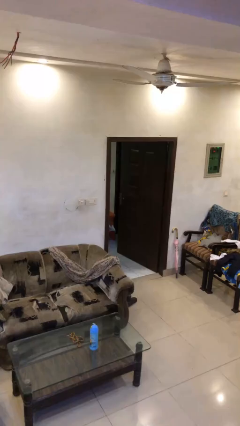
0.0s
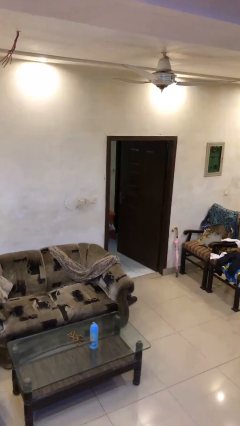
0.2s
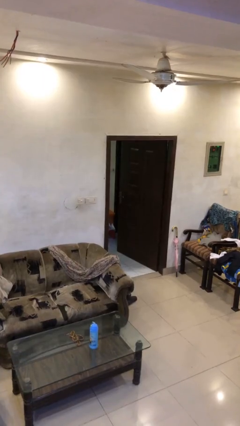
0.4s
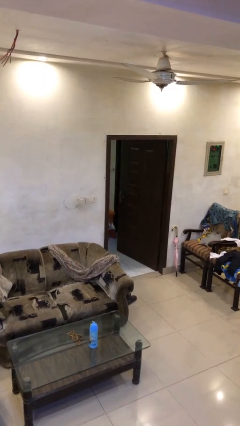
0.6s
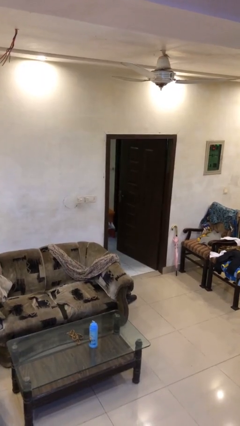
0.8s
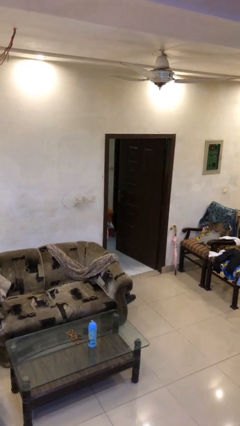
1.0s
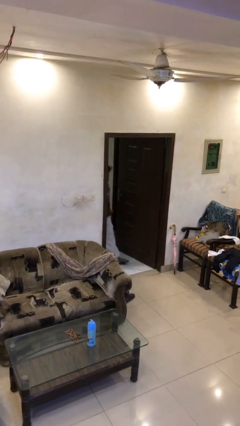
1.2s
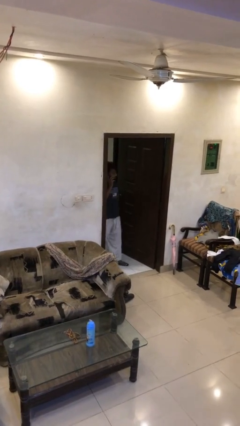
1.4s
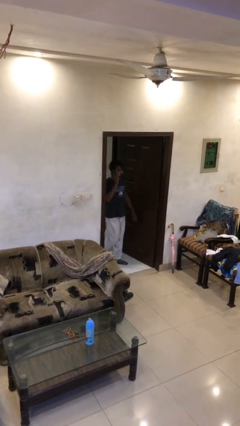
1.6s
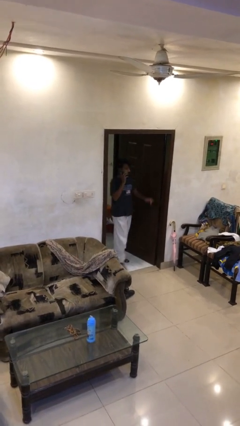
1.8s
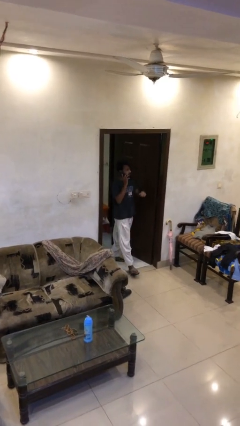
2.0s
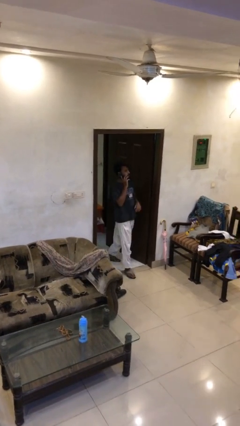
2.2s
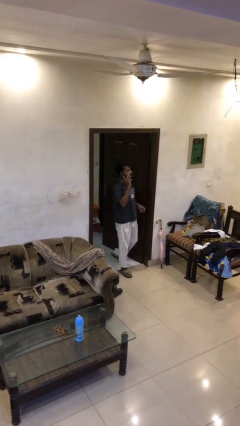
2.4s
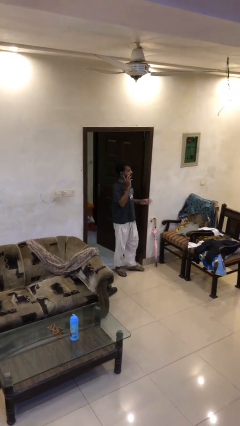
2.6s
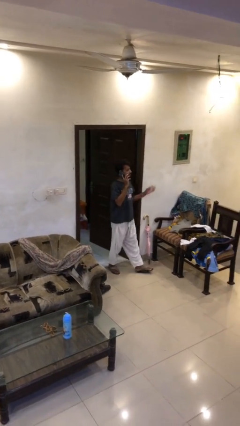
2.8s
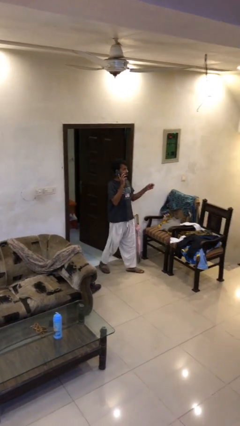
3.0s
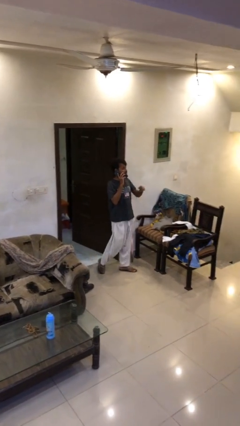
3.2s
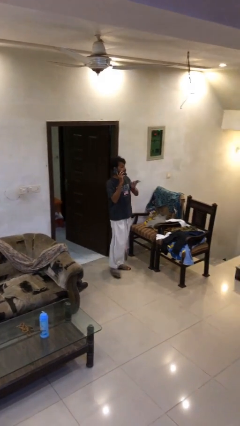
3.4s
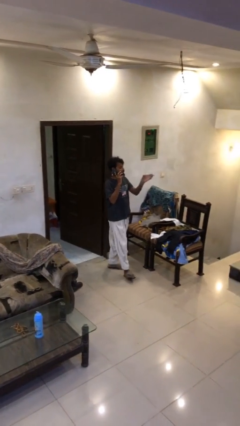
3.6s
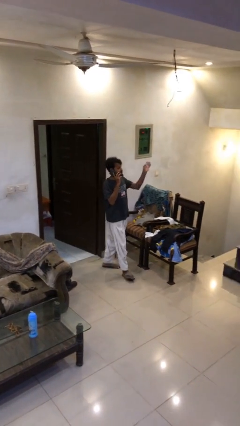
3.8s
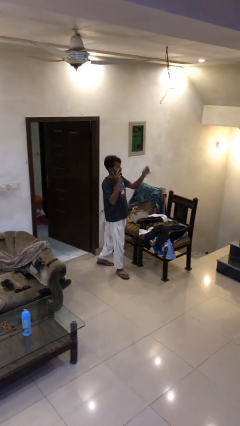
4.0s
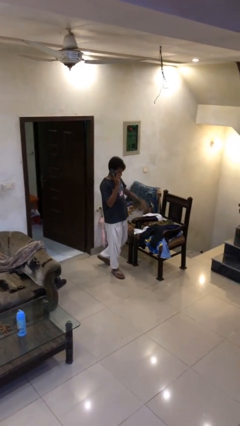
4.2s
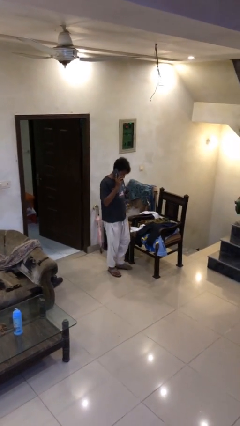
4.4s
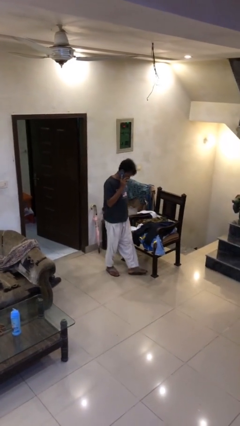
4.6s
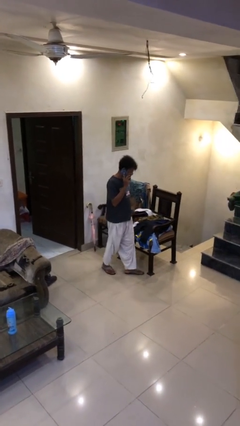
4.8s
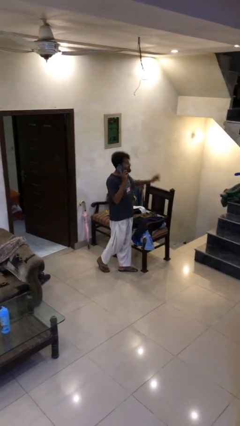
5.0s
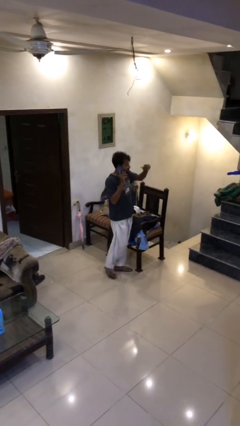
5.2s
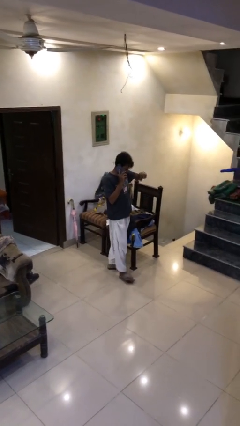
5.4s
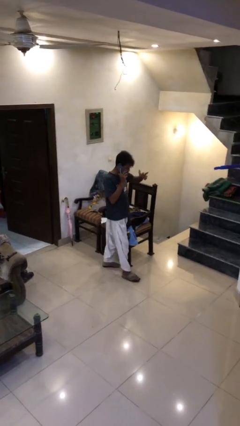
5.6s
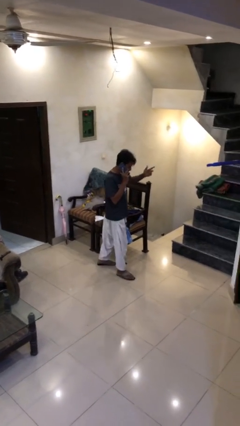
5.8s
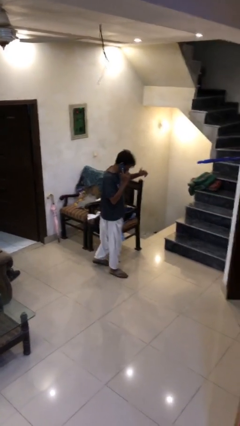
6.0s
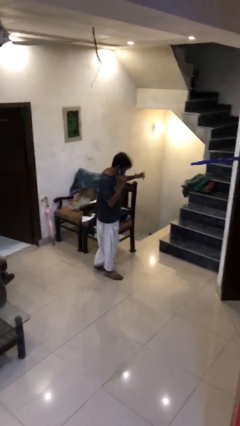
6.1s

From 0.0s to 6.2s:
person enters scene through structure

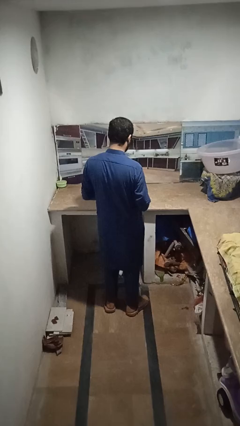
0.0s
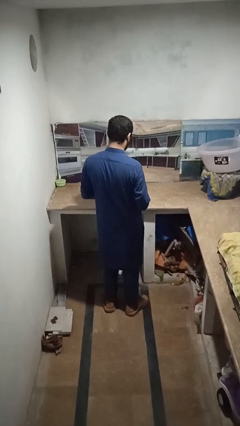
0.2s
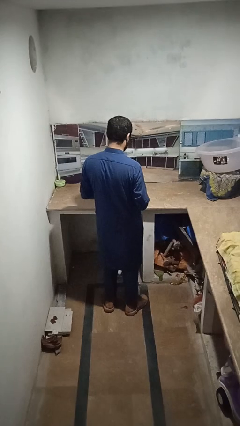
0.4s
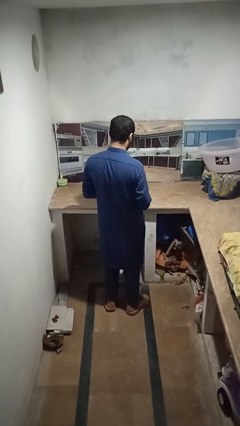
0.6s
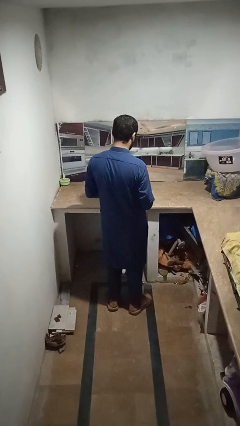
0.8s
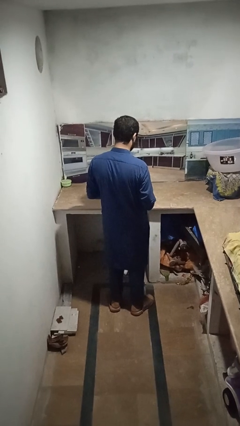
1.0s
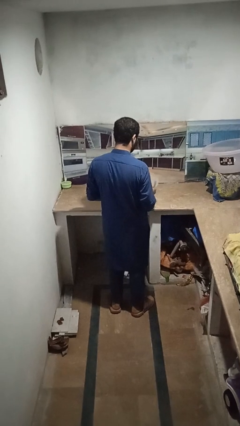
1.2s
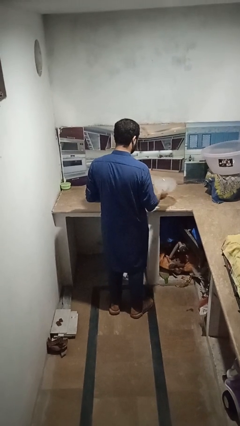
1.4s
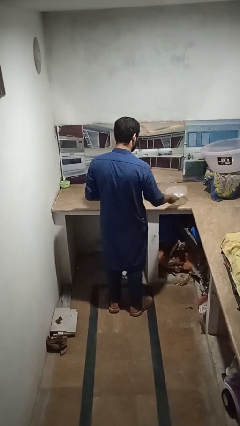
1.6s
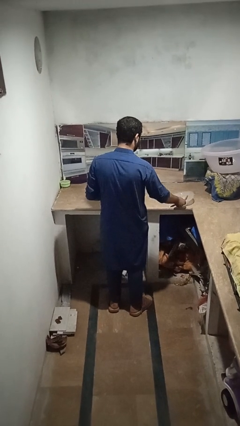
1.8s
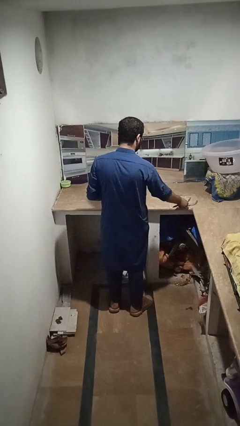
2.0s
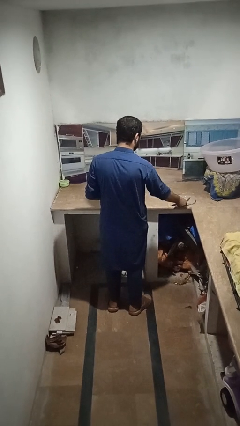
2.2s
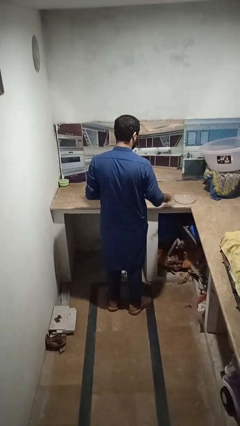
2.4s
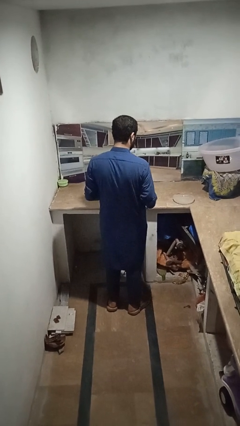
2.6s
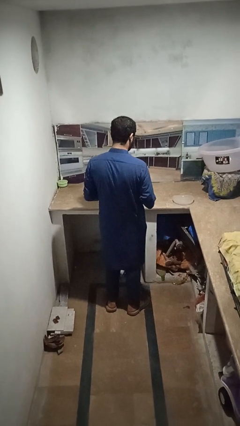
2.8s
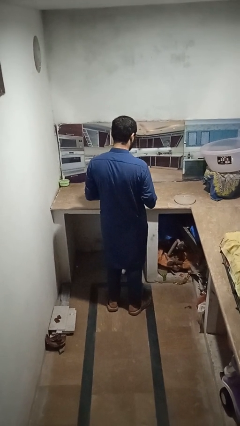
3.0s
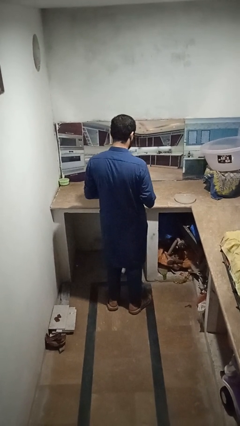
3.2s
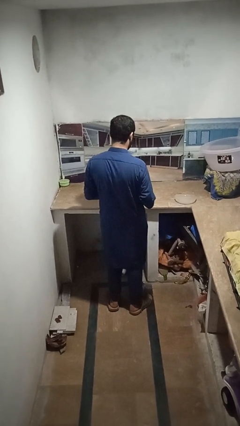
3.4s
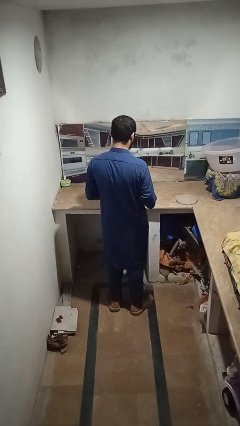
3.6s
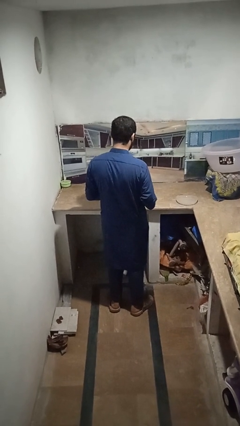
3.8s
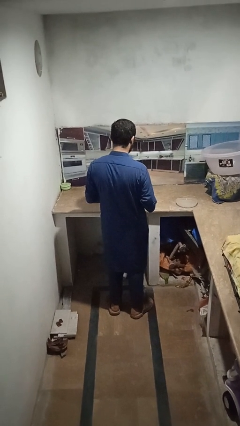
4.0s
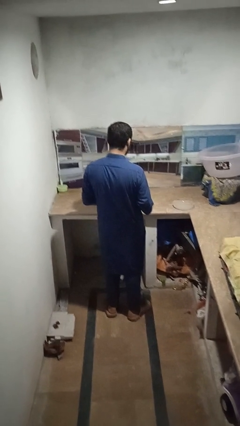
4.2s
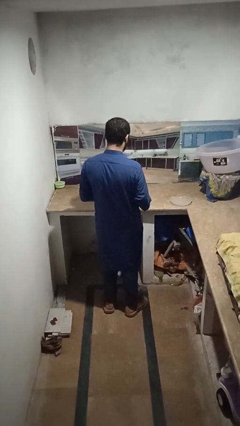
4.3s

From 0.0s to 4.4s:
person sets table

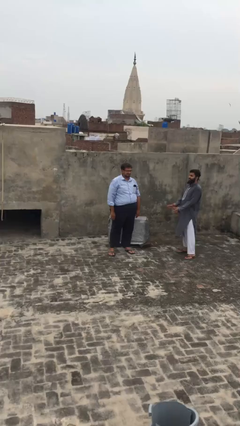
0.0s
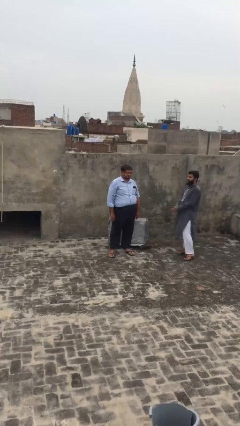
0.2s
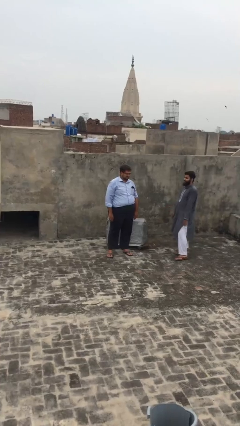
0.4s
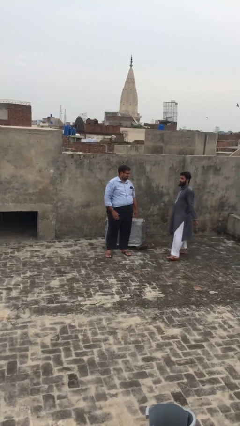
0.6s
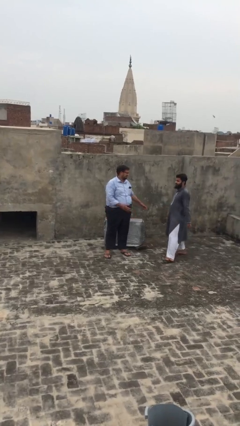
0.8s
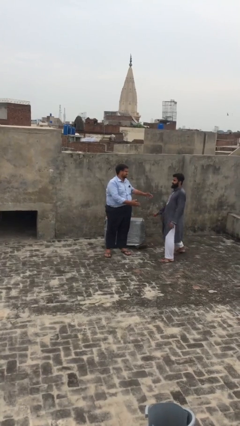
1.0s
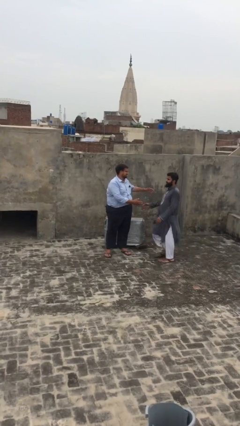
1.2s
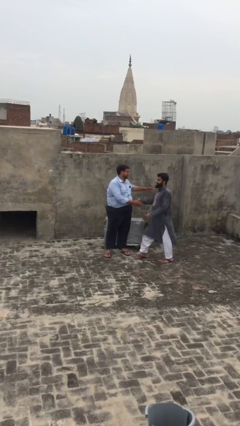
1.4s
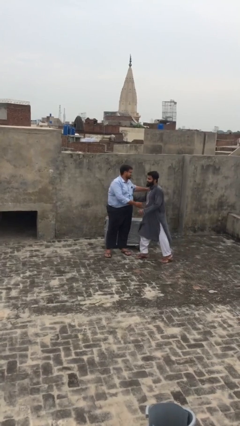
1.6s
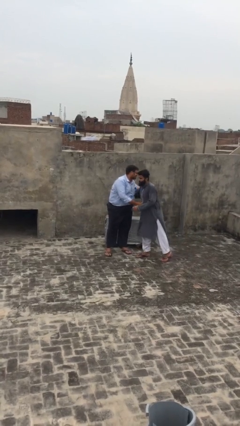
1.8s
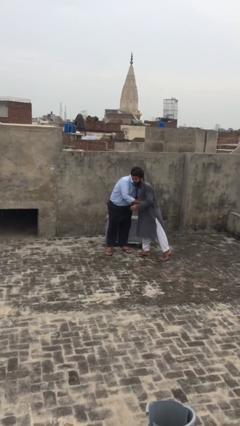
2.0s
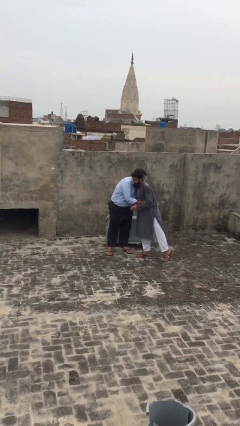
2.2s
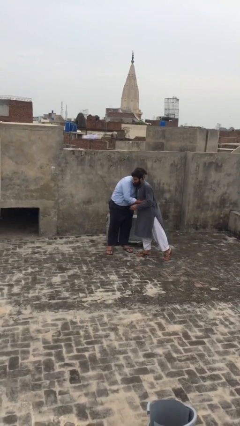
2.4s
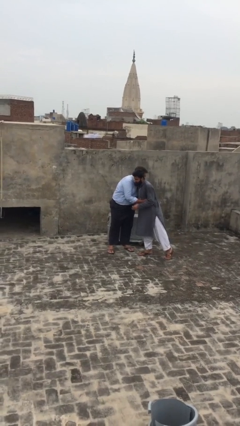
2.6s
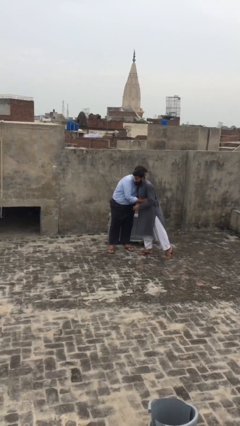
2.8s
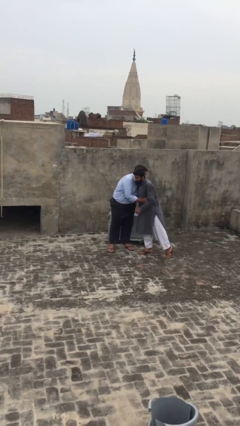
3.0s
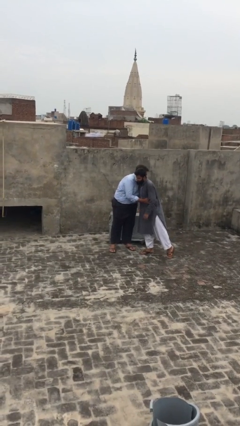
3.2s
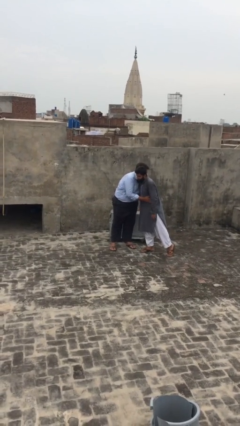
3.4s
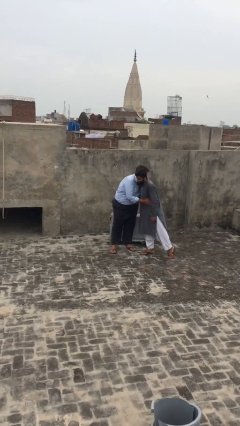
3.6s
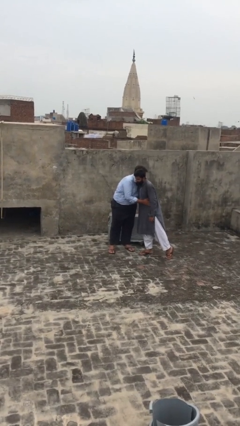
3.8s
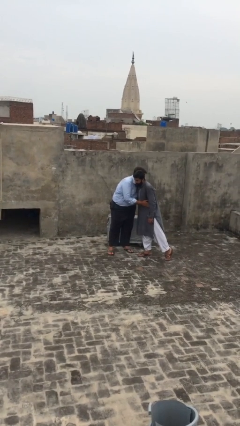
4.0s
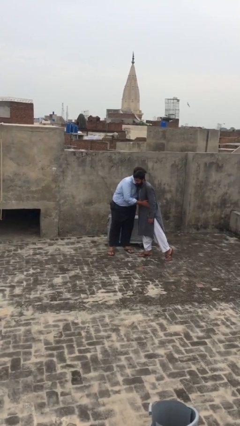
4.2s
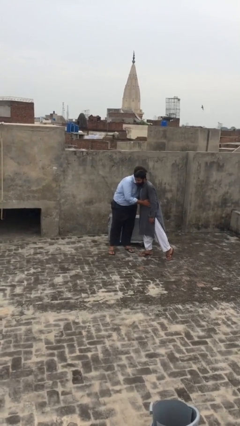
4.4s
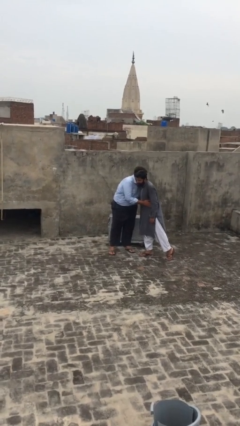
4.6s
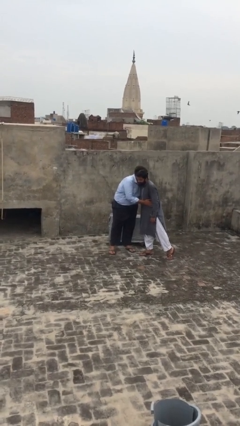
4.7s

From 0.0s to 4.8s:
person embraces person

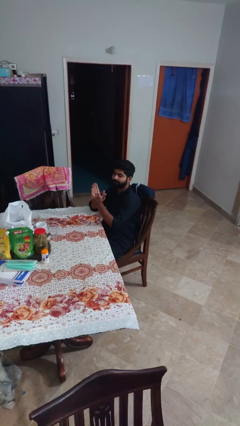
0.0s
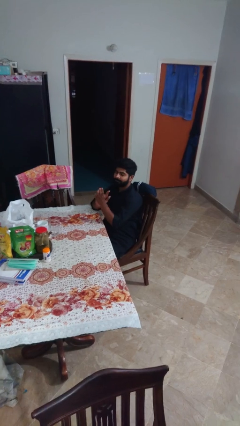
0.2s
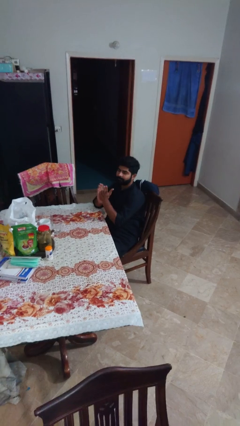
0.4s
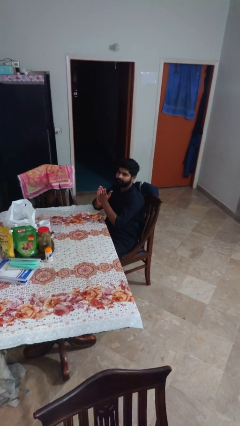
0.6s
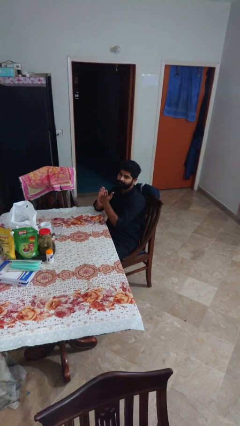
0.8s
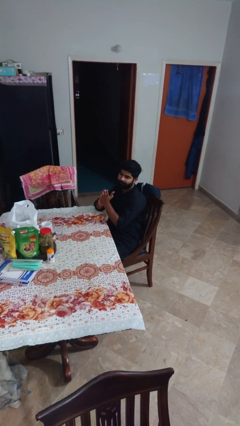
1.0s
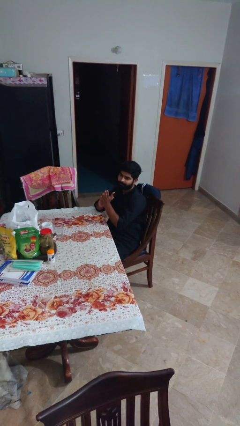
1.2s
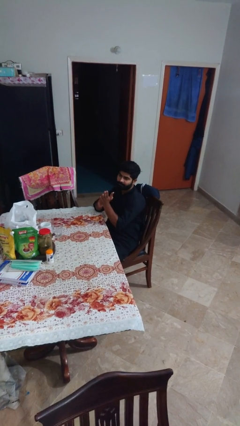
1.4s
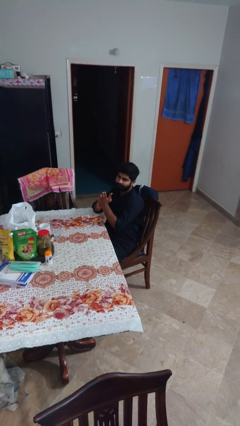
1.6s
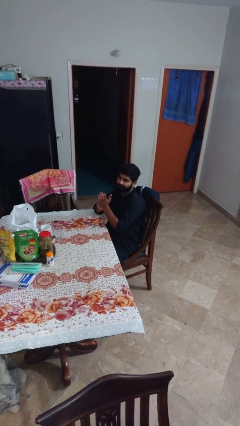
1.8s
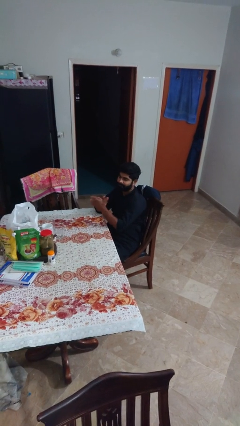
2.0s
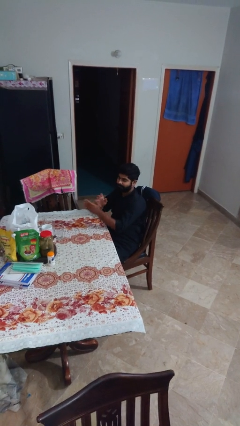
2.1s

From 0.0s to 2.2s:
person claps hands

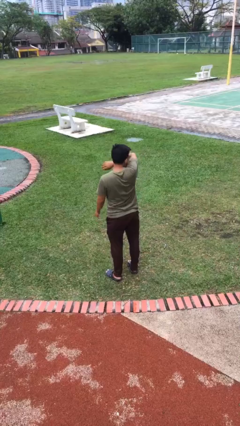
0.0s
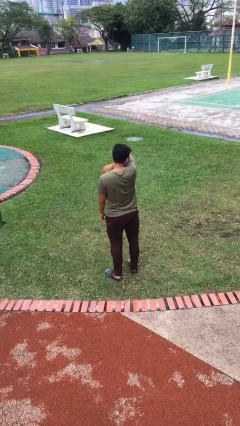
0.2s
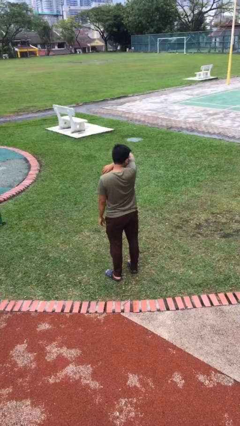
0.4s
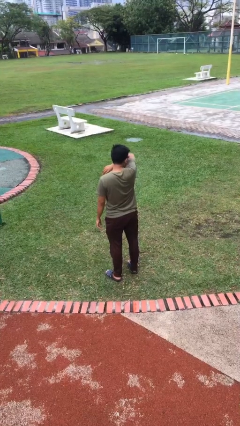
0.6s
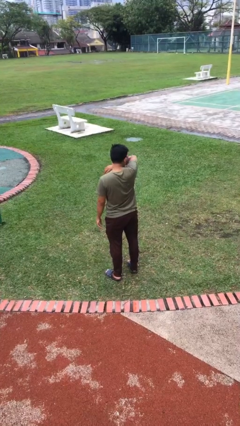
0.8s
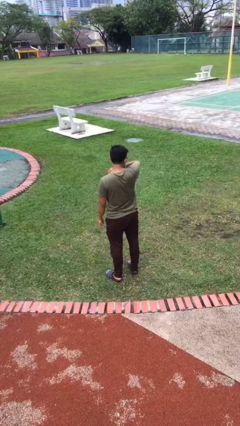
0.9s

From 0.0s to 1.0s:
person sneezes into arm
